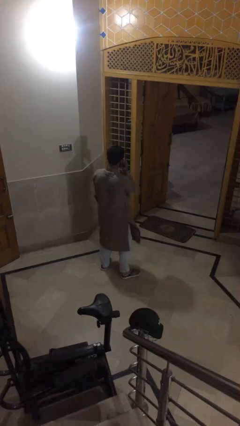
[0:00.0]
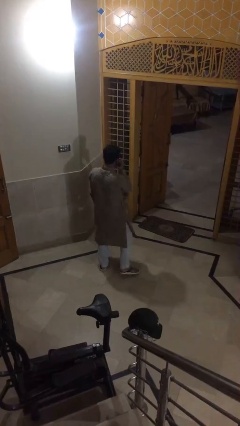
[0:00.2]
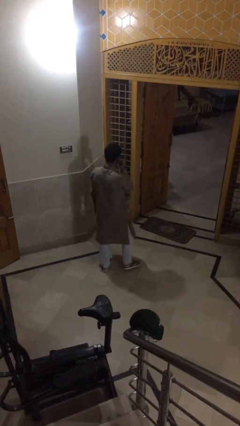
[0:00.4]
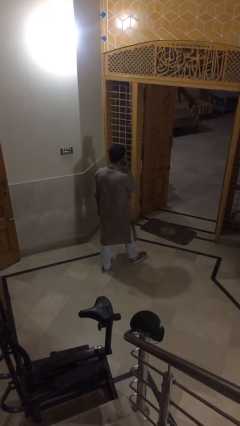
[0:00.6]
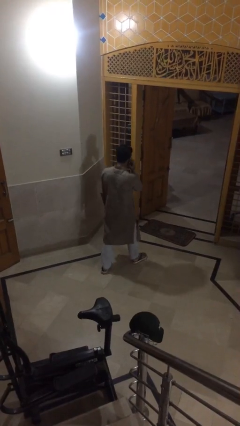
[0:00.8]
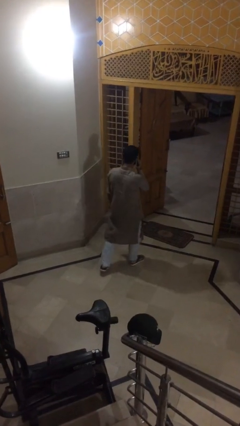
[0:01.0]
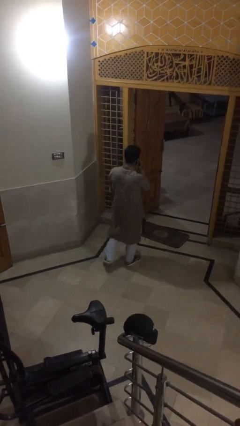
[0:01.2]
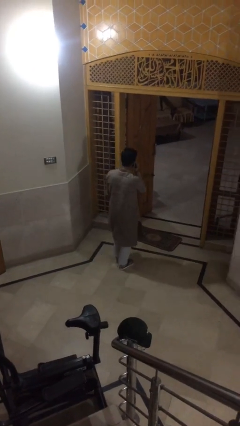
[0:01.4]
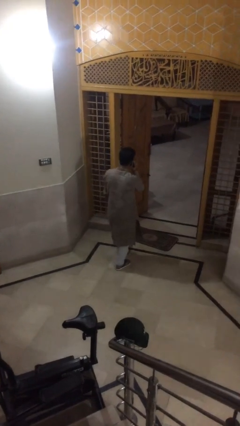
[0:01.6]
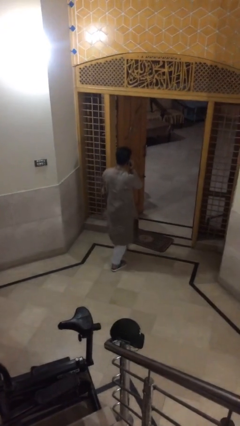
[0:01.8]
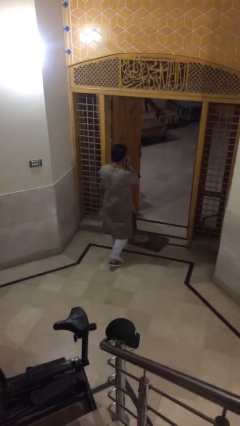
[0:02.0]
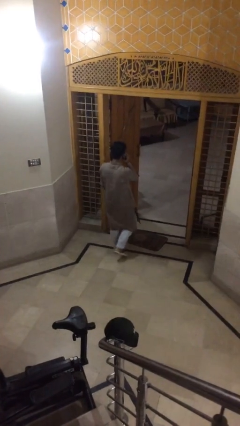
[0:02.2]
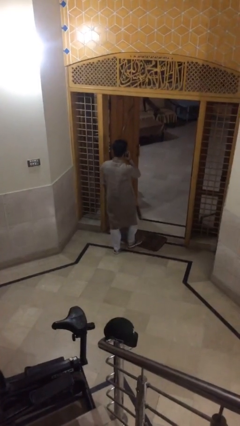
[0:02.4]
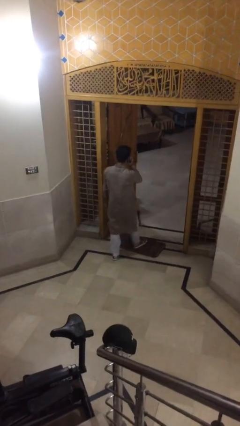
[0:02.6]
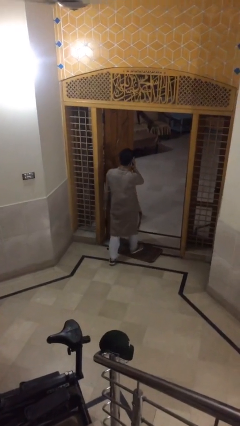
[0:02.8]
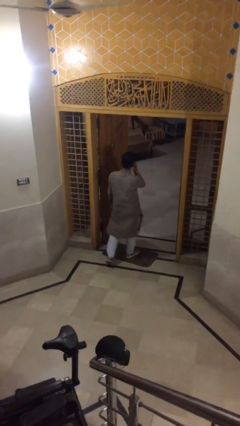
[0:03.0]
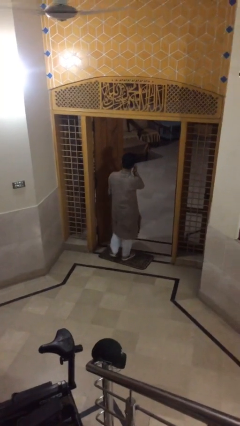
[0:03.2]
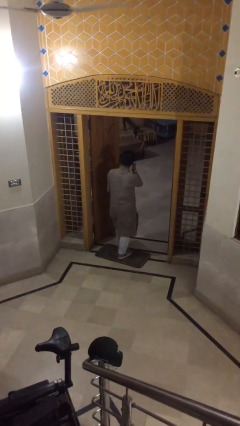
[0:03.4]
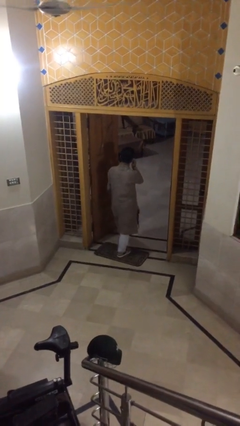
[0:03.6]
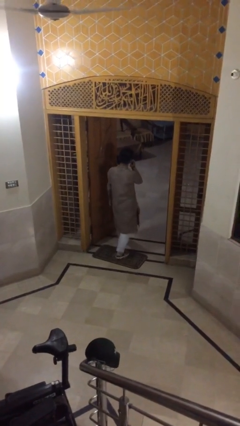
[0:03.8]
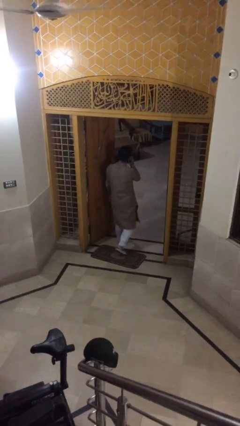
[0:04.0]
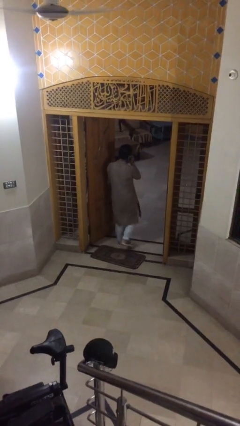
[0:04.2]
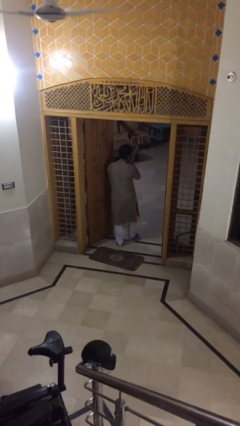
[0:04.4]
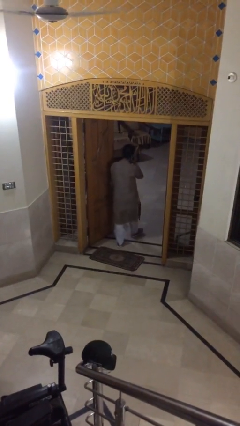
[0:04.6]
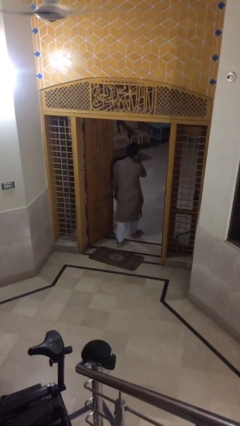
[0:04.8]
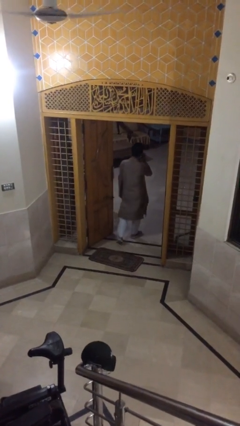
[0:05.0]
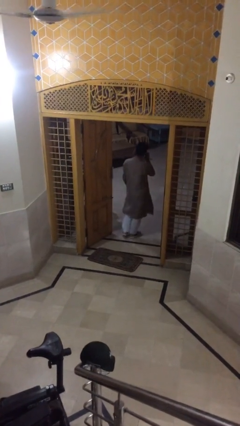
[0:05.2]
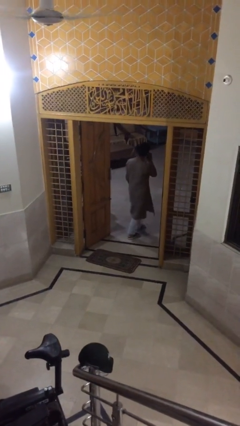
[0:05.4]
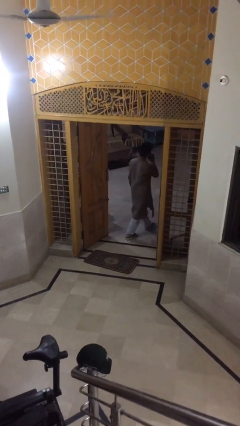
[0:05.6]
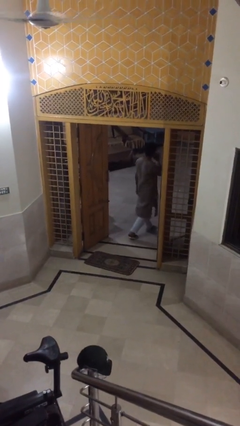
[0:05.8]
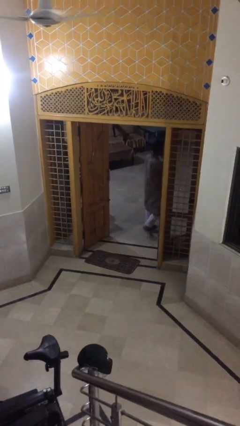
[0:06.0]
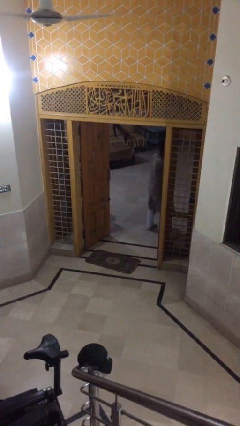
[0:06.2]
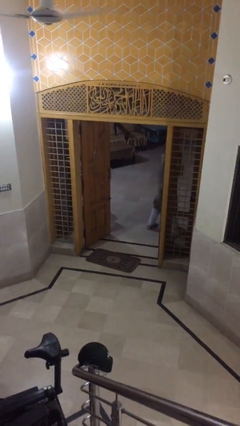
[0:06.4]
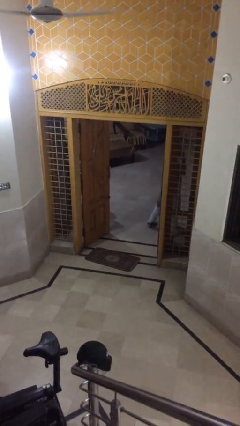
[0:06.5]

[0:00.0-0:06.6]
person exits scene through structure

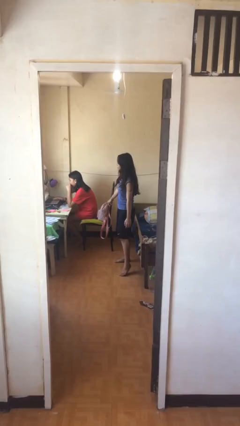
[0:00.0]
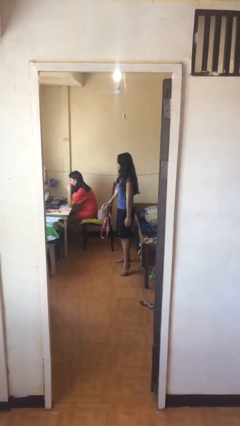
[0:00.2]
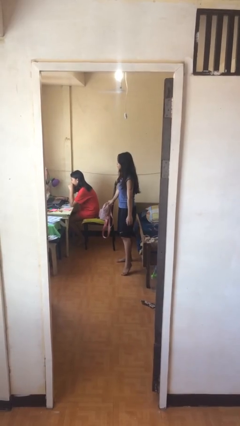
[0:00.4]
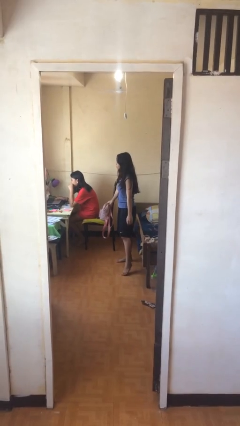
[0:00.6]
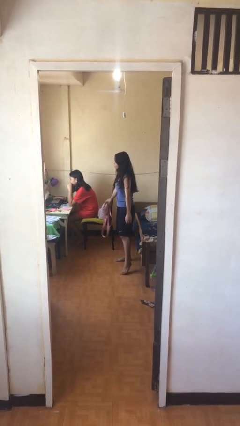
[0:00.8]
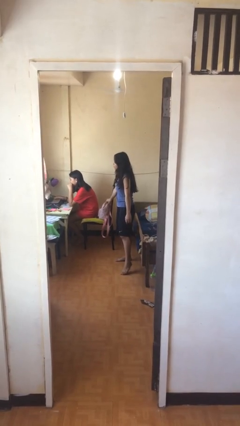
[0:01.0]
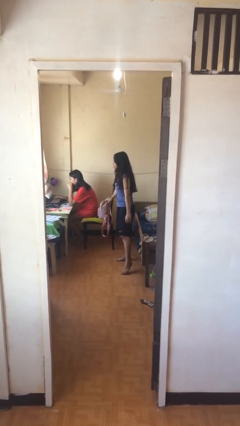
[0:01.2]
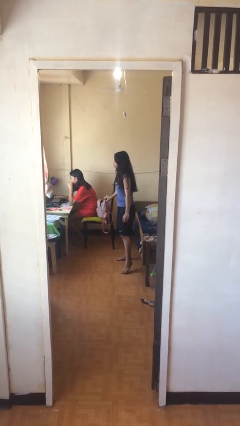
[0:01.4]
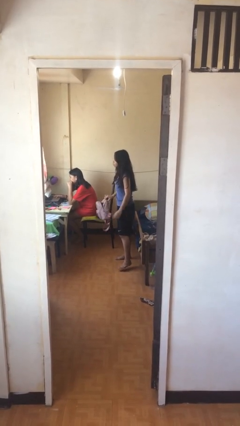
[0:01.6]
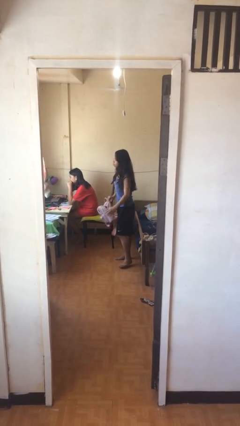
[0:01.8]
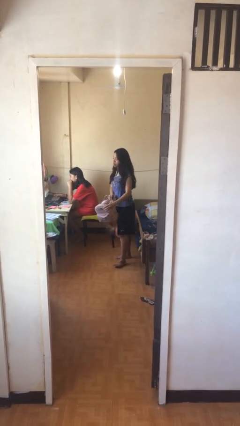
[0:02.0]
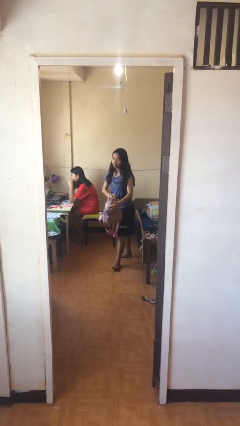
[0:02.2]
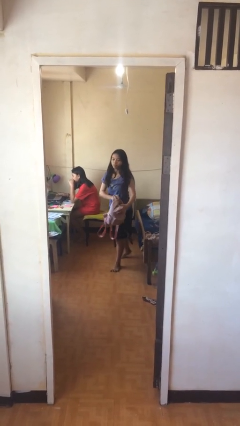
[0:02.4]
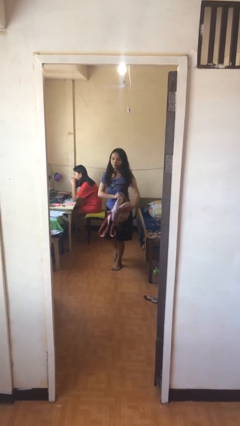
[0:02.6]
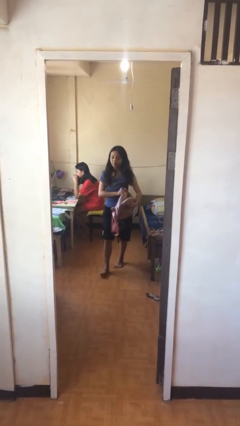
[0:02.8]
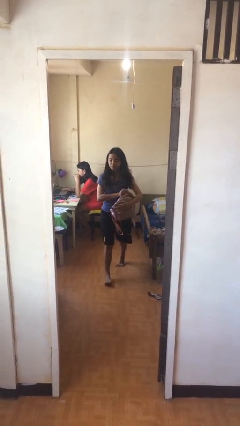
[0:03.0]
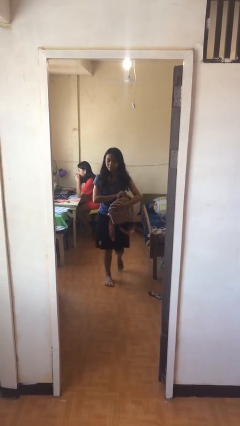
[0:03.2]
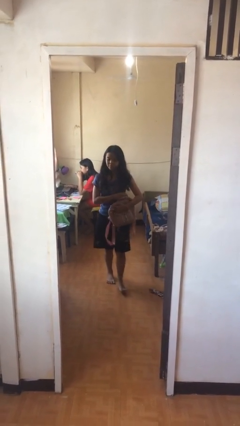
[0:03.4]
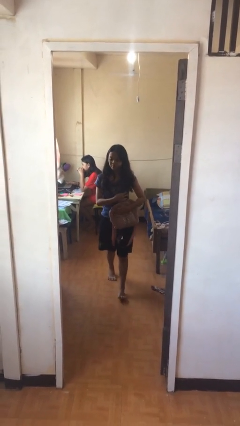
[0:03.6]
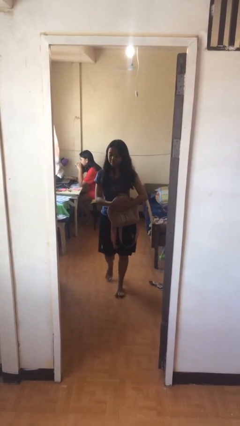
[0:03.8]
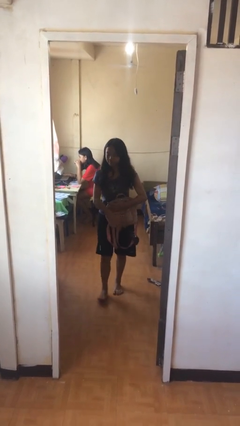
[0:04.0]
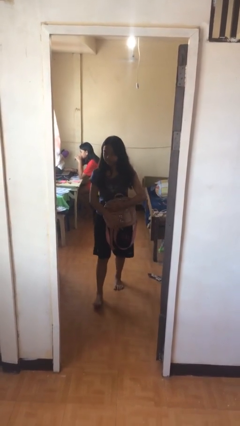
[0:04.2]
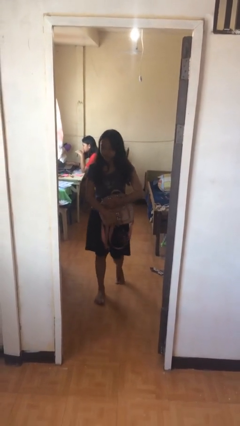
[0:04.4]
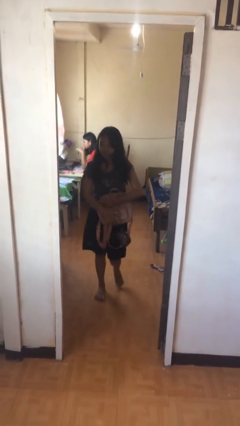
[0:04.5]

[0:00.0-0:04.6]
person steals object from person

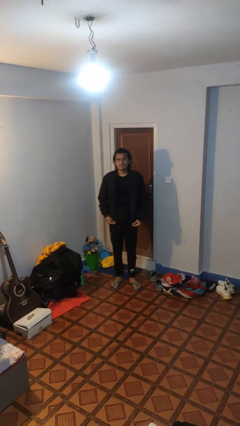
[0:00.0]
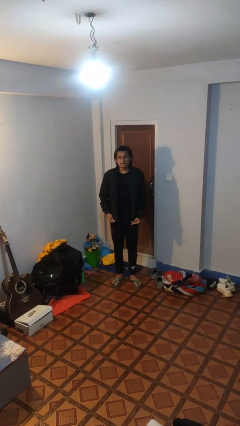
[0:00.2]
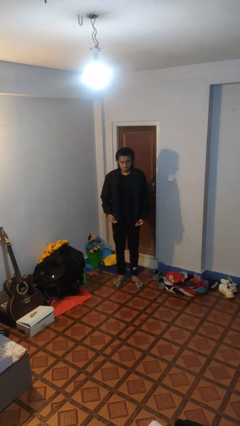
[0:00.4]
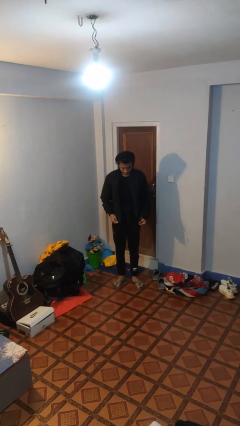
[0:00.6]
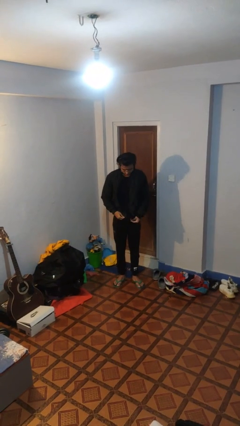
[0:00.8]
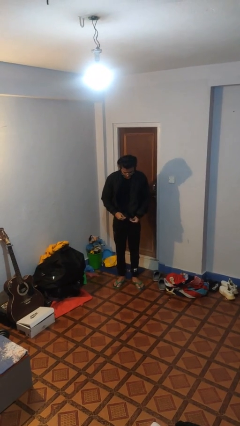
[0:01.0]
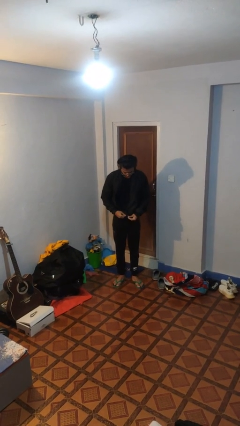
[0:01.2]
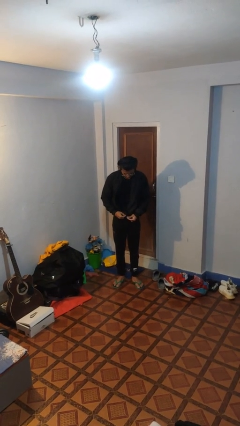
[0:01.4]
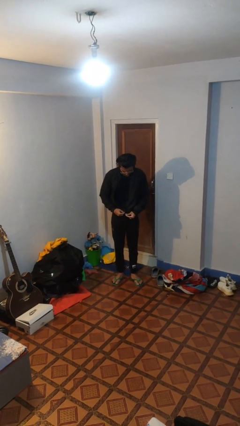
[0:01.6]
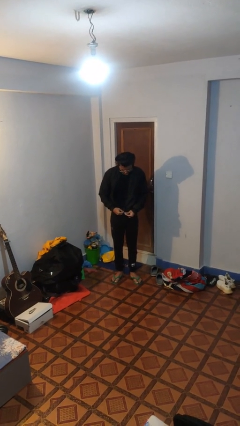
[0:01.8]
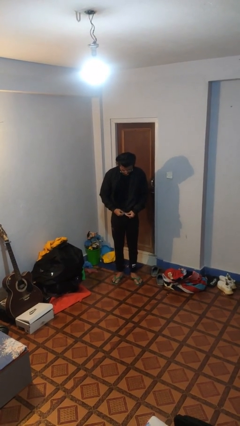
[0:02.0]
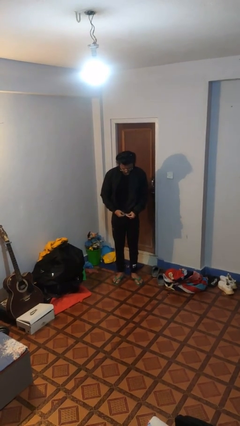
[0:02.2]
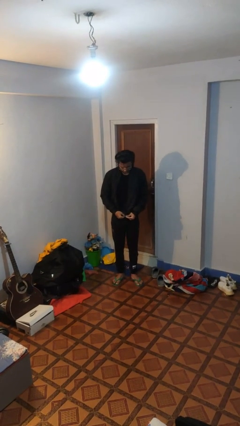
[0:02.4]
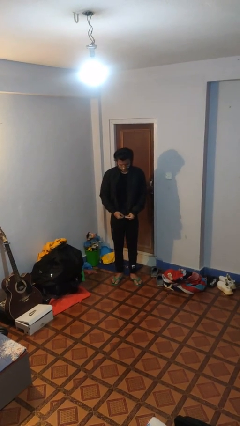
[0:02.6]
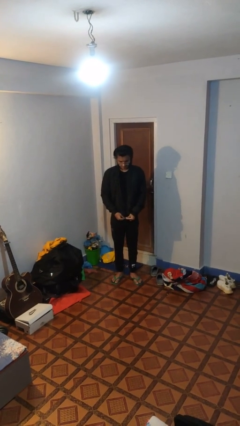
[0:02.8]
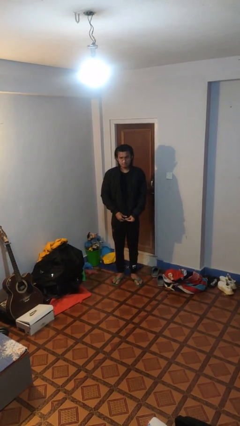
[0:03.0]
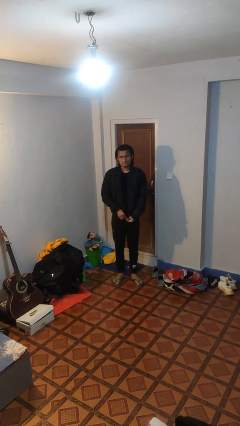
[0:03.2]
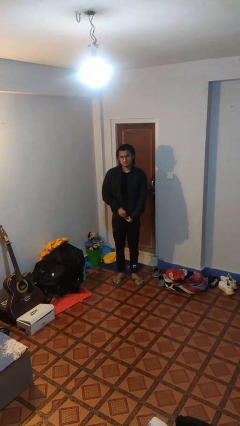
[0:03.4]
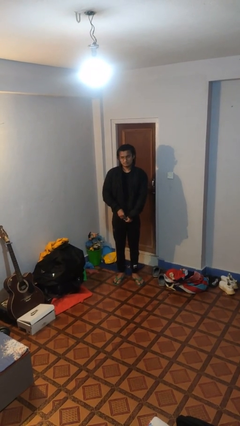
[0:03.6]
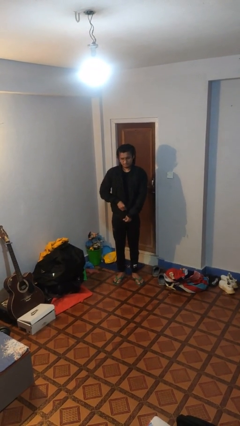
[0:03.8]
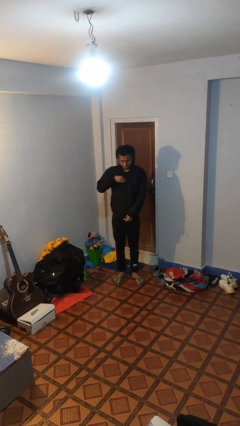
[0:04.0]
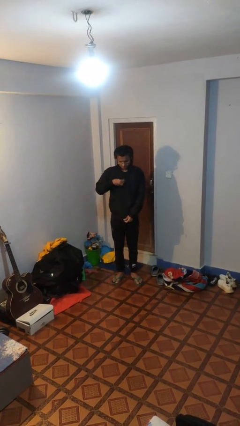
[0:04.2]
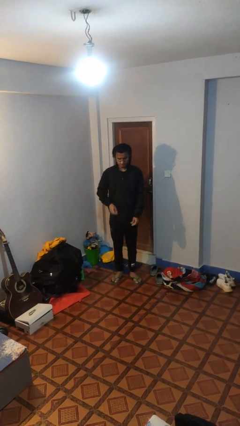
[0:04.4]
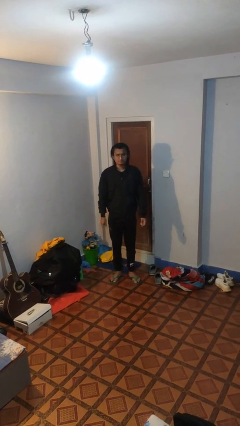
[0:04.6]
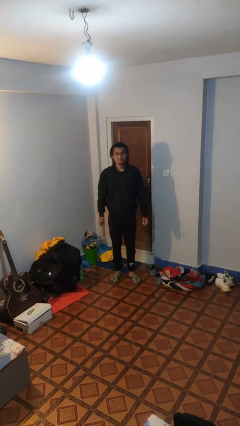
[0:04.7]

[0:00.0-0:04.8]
person zips up jacket

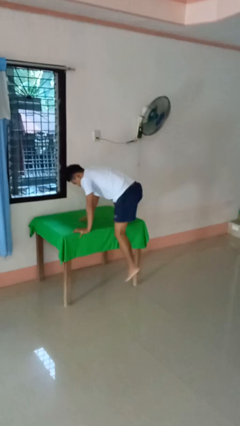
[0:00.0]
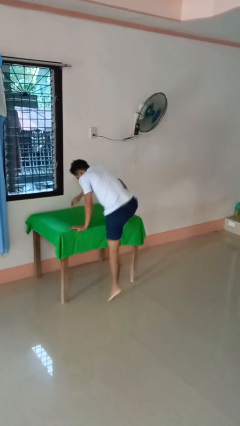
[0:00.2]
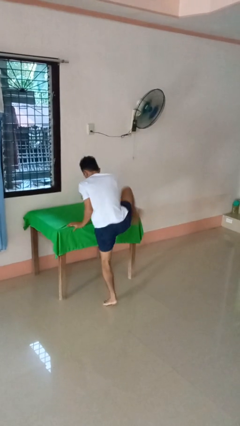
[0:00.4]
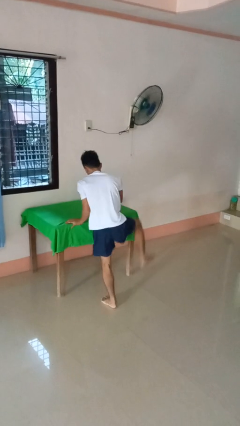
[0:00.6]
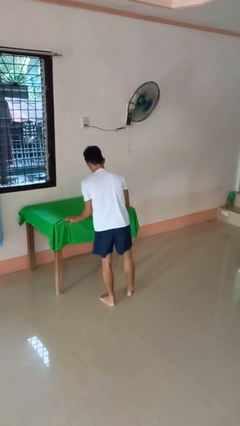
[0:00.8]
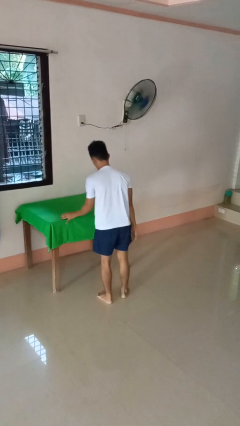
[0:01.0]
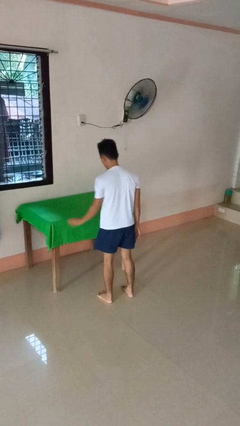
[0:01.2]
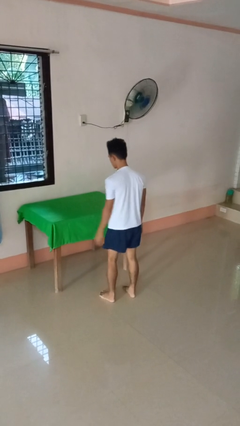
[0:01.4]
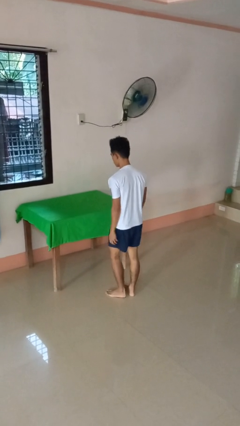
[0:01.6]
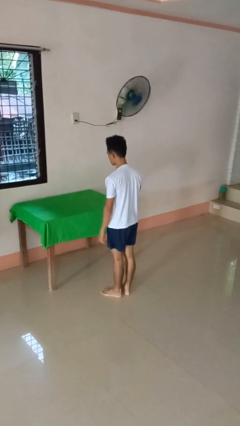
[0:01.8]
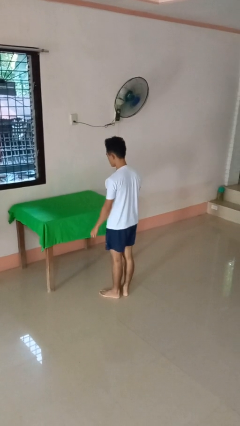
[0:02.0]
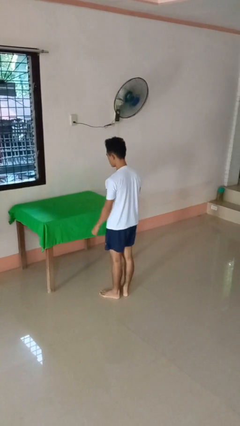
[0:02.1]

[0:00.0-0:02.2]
person climbs off table
